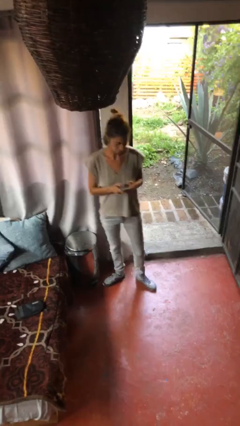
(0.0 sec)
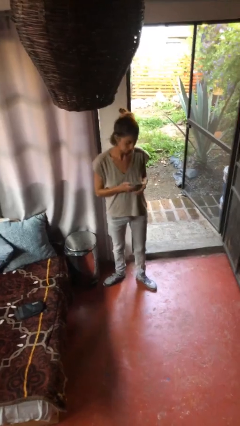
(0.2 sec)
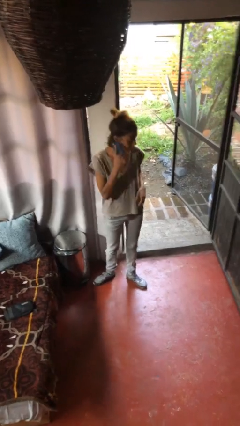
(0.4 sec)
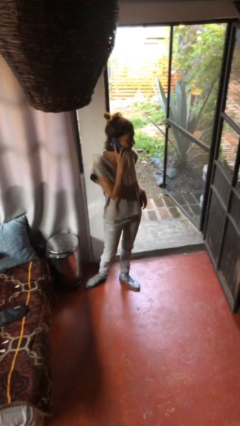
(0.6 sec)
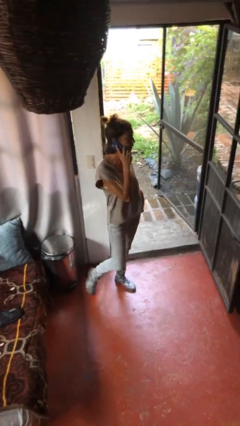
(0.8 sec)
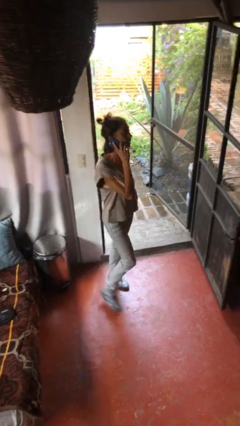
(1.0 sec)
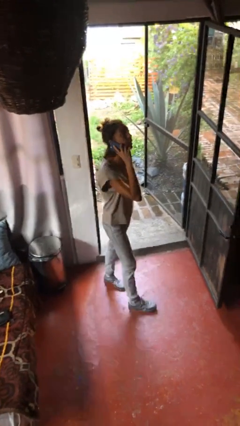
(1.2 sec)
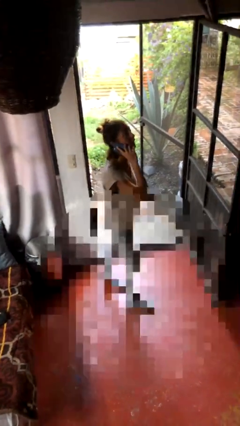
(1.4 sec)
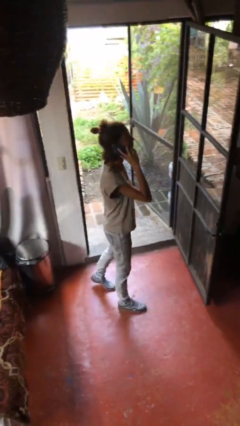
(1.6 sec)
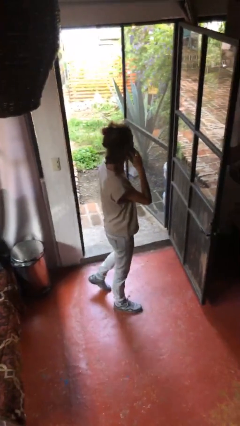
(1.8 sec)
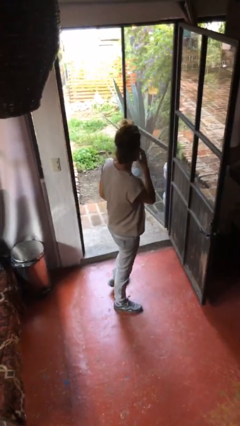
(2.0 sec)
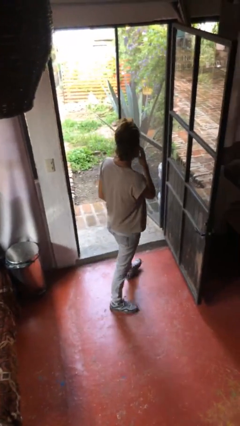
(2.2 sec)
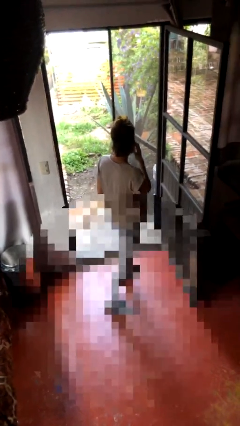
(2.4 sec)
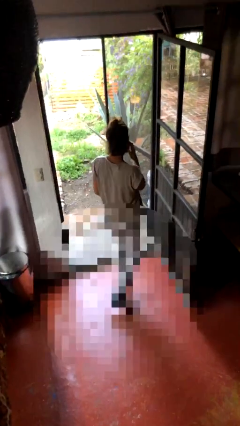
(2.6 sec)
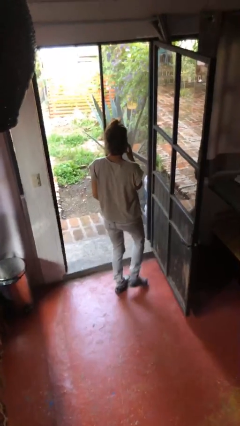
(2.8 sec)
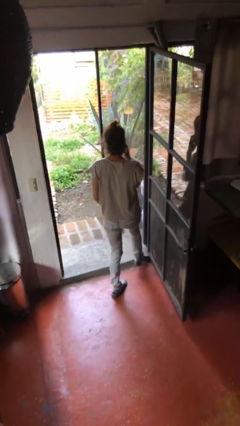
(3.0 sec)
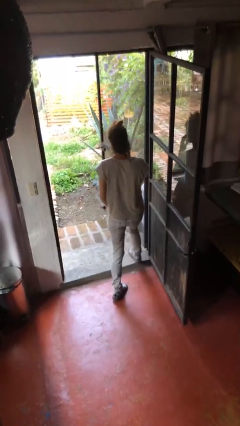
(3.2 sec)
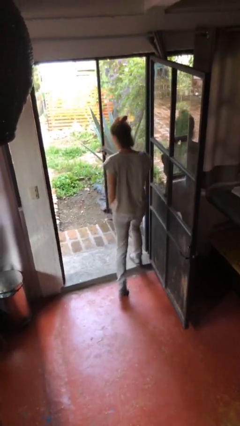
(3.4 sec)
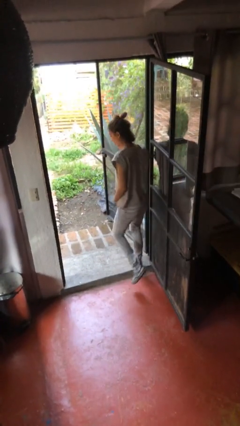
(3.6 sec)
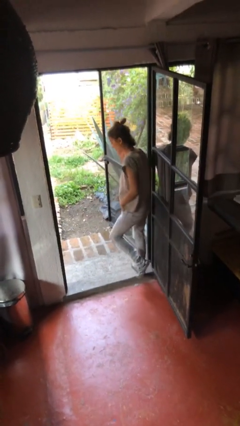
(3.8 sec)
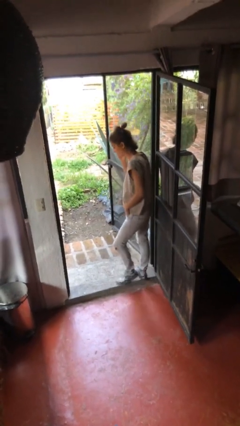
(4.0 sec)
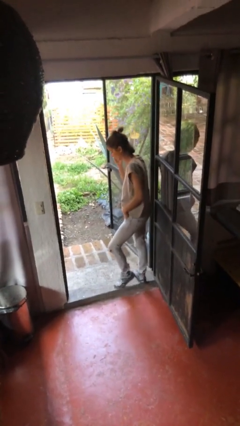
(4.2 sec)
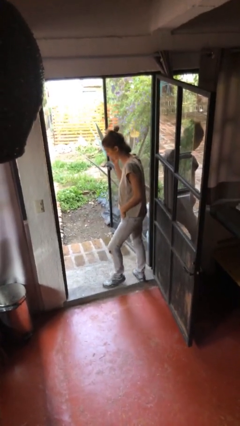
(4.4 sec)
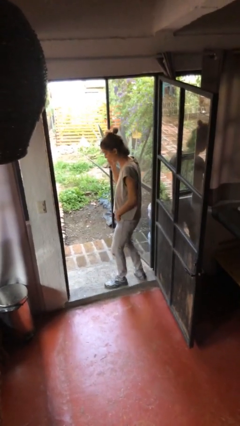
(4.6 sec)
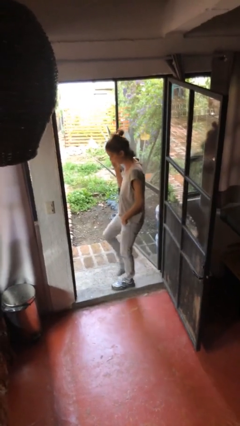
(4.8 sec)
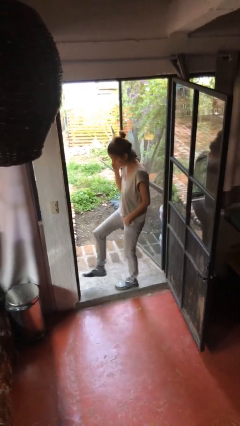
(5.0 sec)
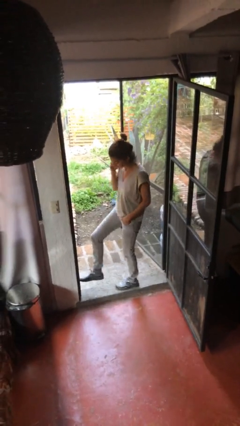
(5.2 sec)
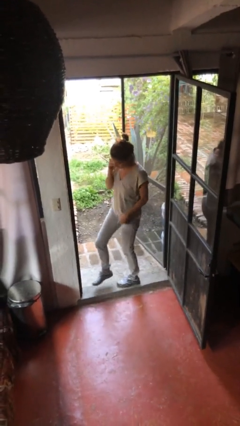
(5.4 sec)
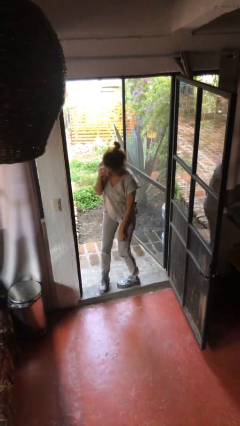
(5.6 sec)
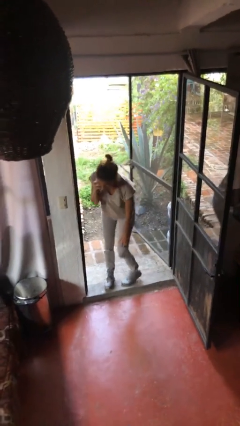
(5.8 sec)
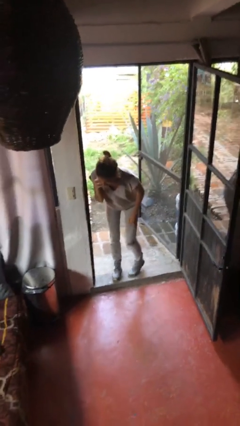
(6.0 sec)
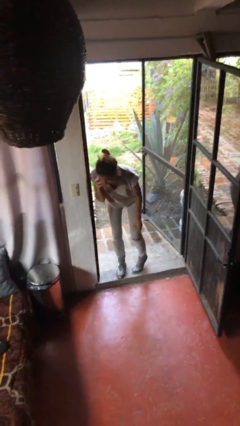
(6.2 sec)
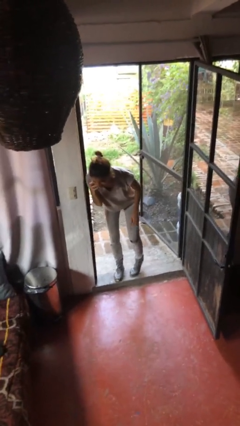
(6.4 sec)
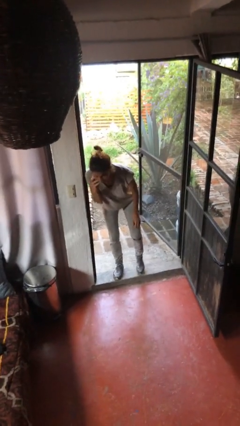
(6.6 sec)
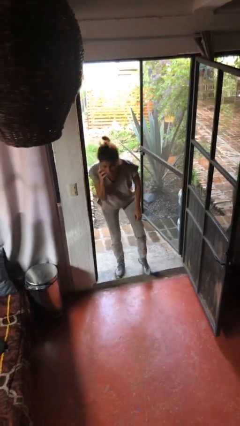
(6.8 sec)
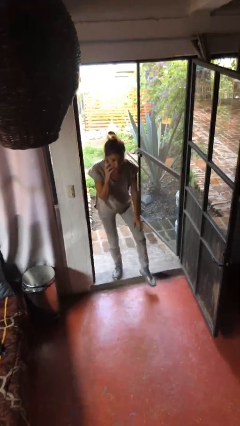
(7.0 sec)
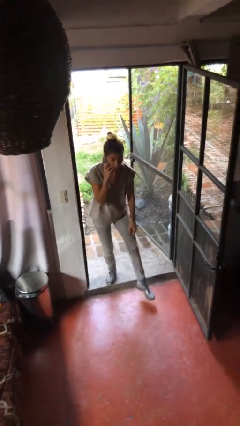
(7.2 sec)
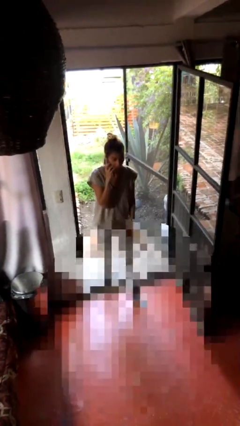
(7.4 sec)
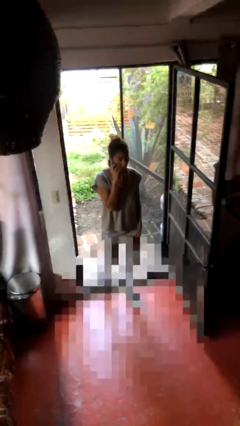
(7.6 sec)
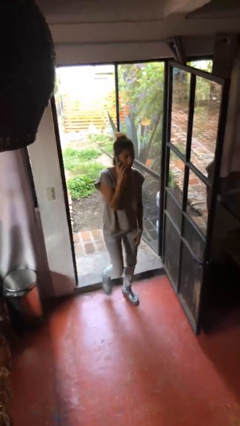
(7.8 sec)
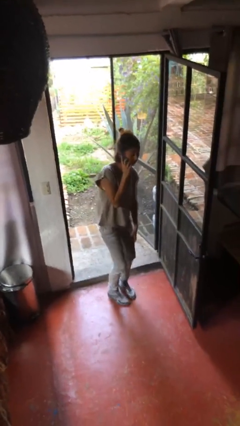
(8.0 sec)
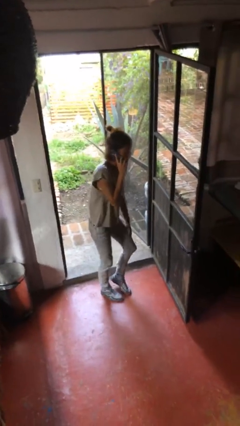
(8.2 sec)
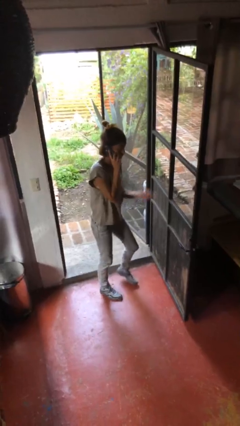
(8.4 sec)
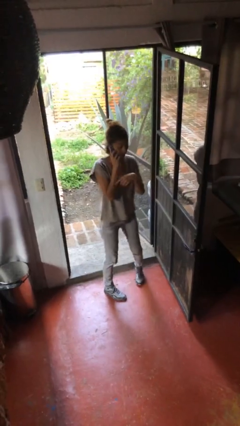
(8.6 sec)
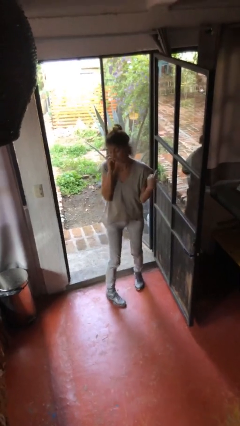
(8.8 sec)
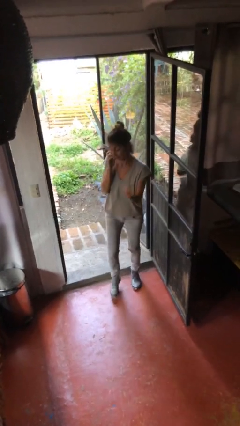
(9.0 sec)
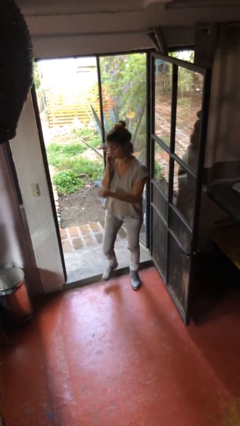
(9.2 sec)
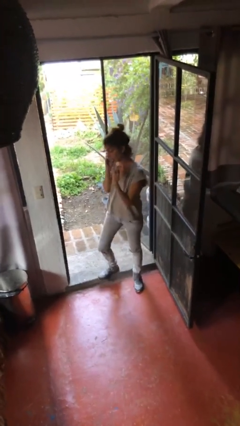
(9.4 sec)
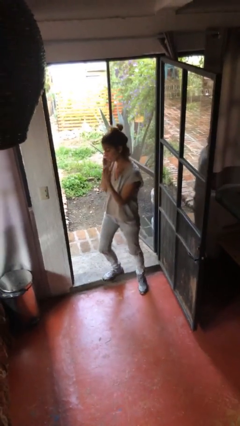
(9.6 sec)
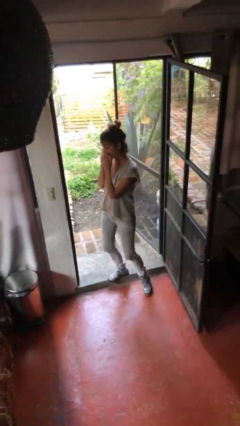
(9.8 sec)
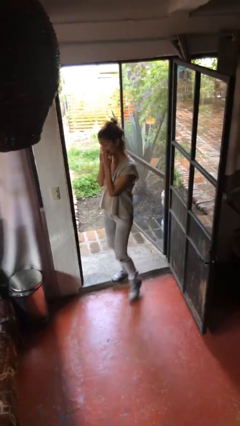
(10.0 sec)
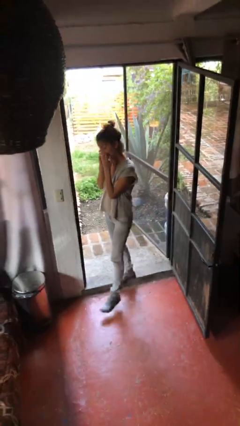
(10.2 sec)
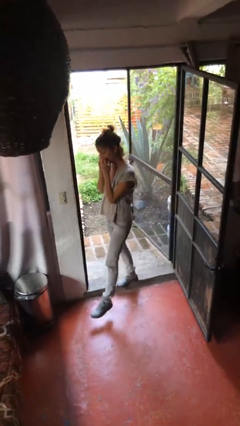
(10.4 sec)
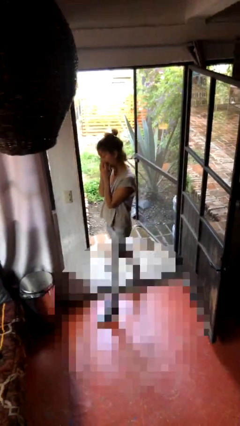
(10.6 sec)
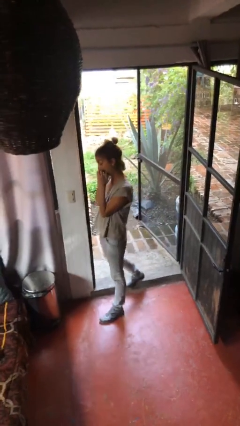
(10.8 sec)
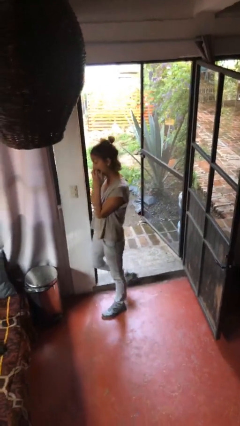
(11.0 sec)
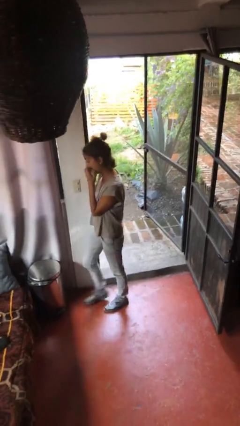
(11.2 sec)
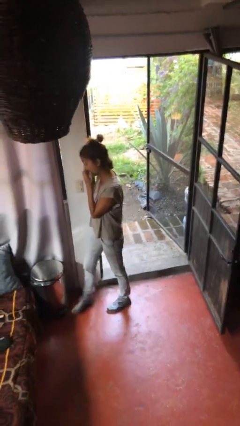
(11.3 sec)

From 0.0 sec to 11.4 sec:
person talks on phone

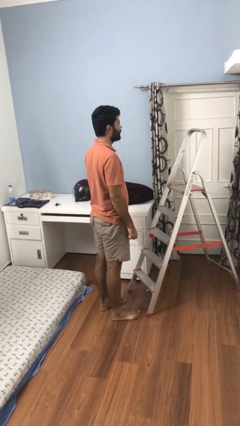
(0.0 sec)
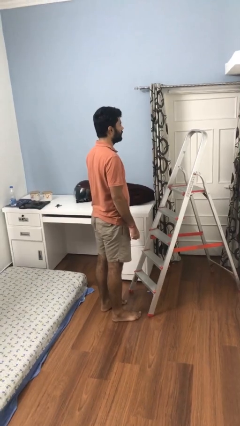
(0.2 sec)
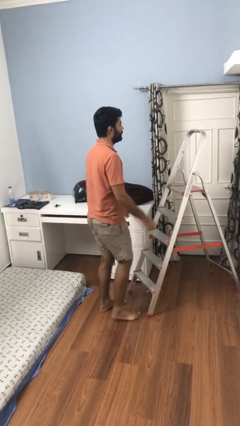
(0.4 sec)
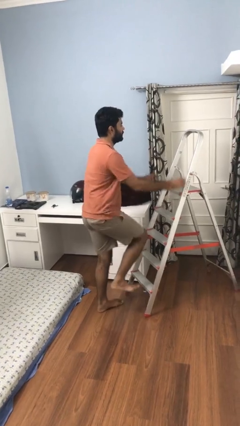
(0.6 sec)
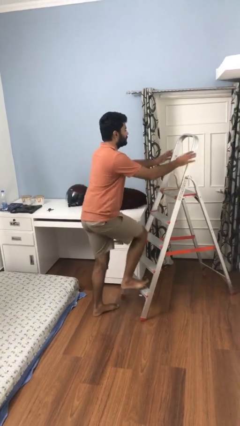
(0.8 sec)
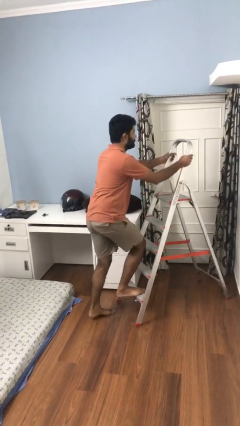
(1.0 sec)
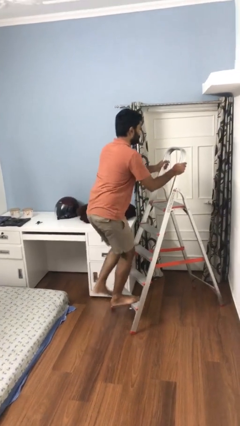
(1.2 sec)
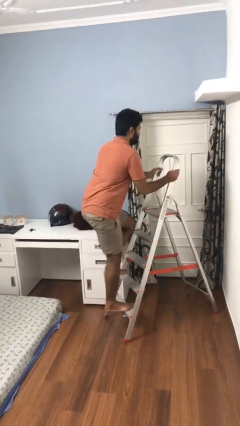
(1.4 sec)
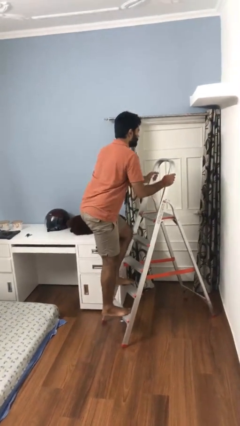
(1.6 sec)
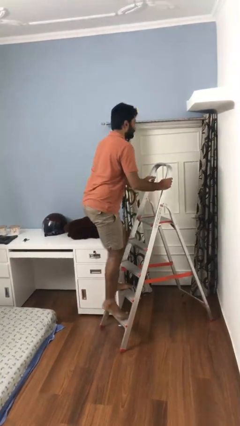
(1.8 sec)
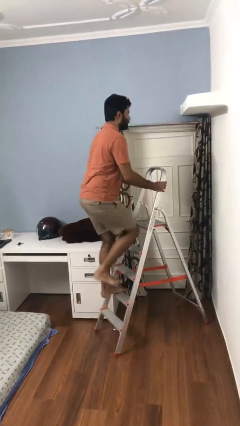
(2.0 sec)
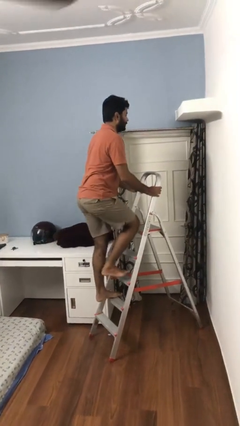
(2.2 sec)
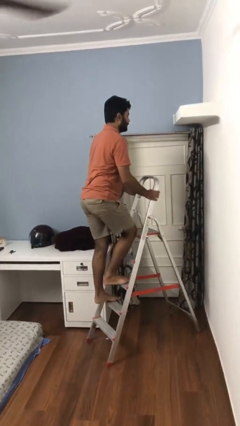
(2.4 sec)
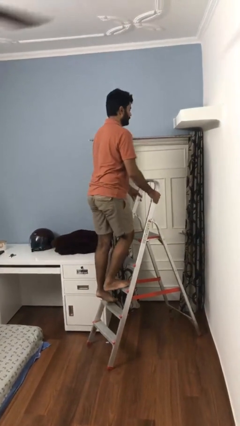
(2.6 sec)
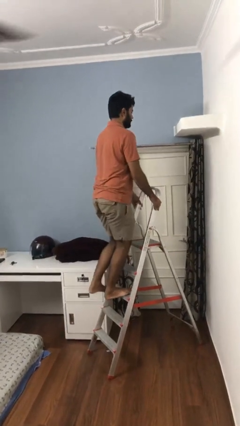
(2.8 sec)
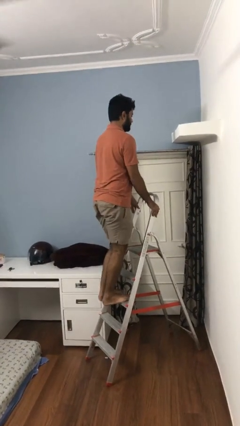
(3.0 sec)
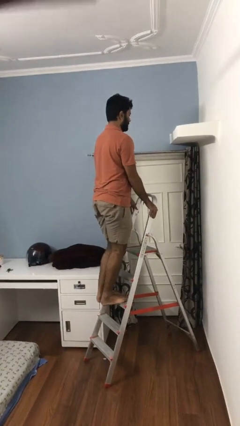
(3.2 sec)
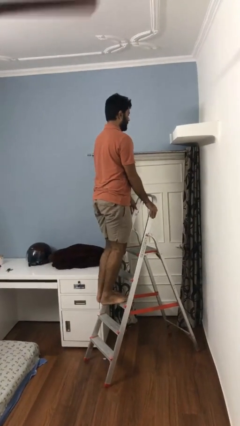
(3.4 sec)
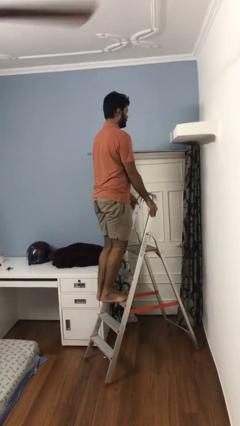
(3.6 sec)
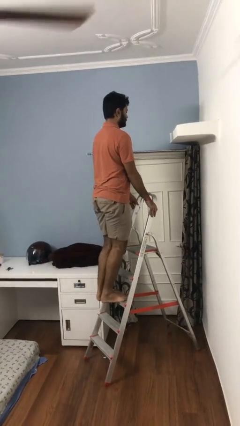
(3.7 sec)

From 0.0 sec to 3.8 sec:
person climbs up ladder

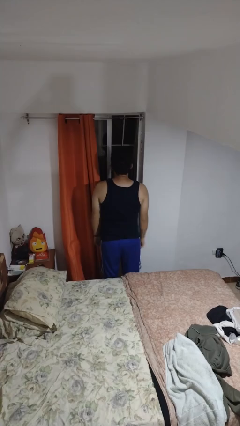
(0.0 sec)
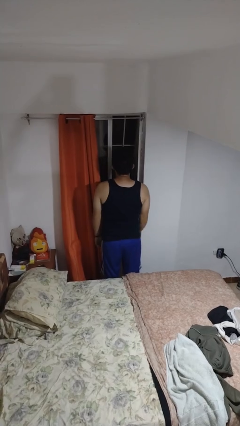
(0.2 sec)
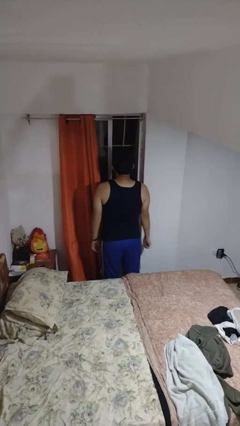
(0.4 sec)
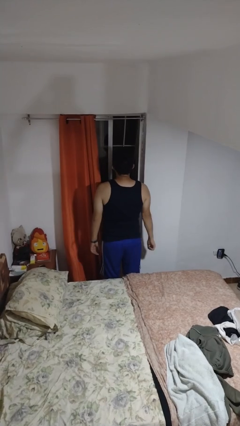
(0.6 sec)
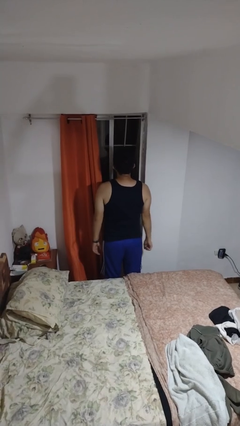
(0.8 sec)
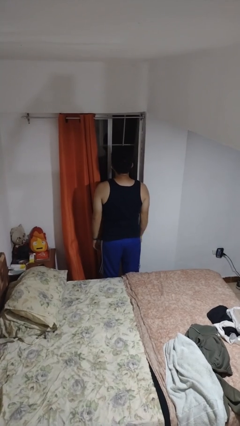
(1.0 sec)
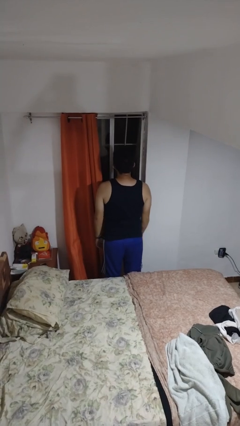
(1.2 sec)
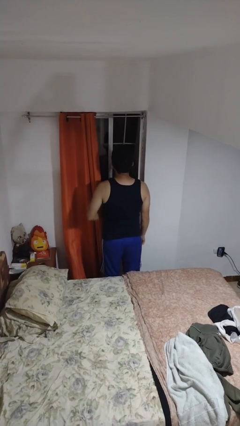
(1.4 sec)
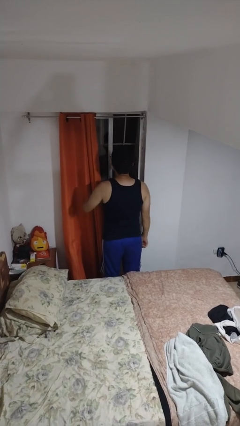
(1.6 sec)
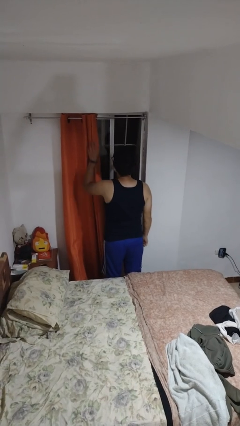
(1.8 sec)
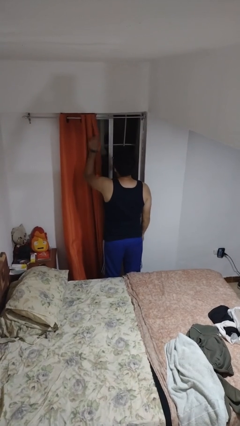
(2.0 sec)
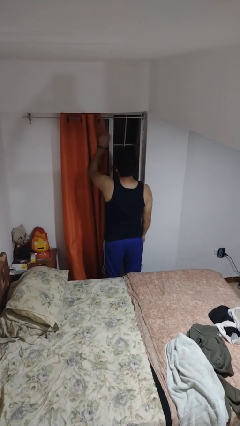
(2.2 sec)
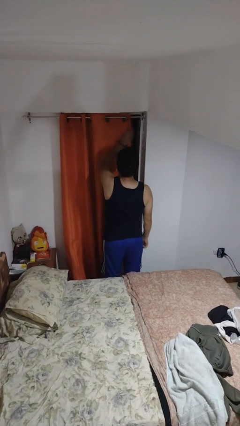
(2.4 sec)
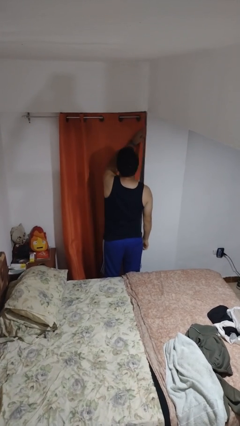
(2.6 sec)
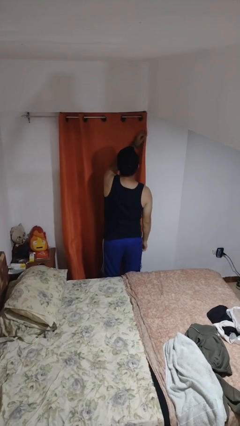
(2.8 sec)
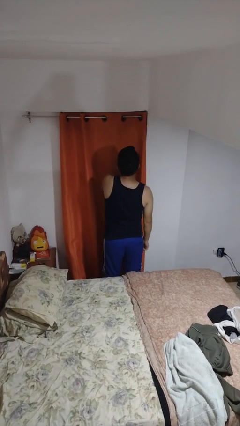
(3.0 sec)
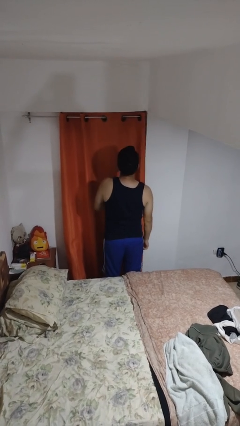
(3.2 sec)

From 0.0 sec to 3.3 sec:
person closes curtains
